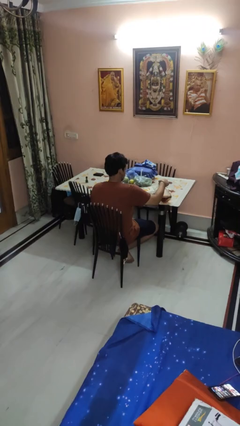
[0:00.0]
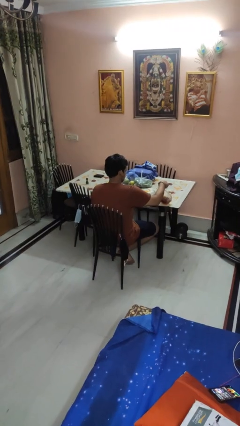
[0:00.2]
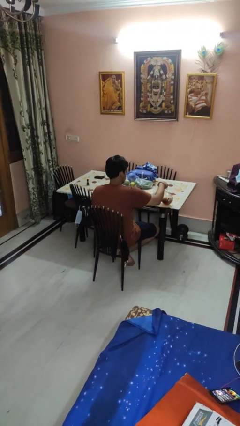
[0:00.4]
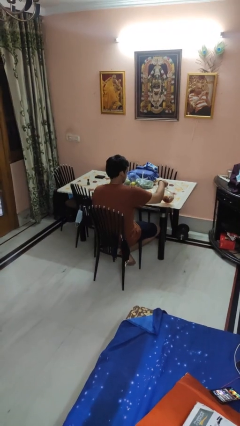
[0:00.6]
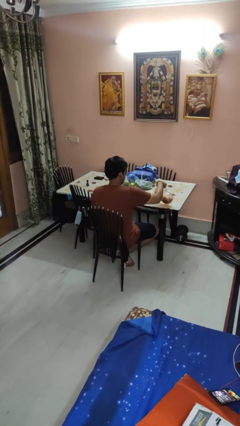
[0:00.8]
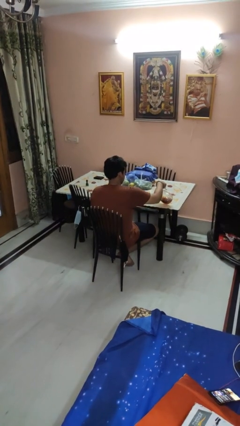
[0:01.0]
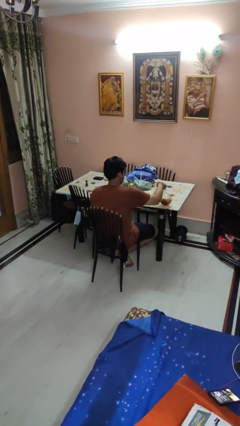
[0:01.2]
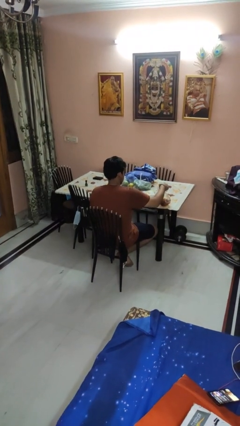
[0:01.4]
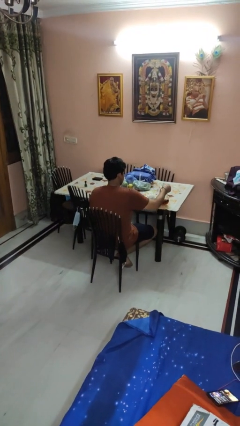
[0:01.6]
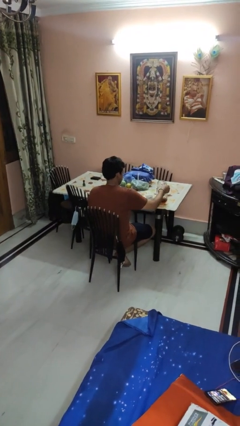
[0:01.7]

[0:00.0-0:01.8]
person pours coffee into mug

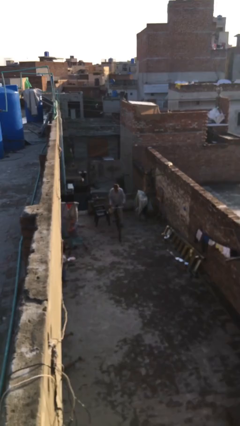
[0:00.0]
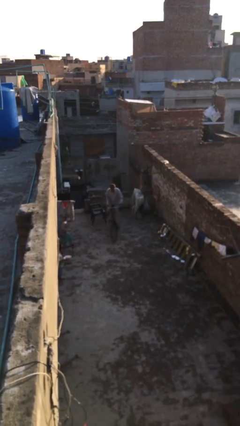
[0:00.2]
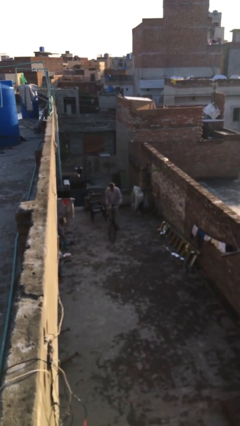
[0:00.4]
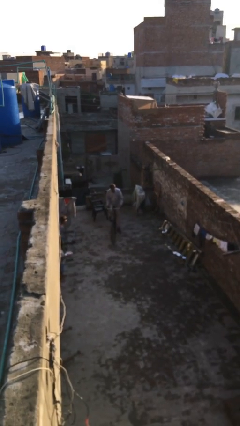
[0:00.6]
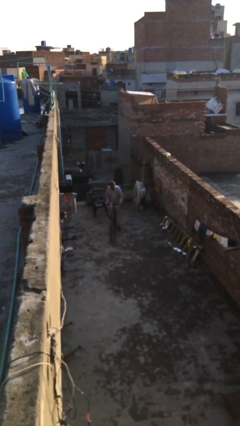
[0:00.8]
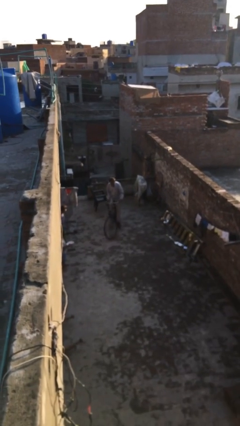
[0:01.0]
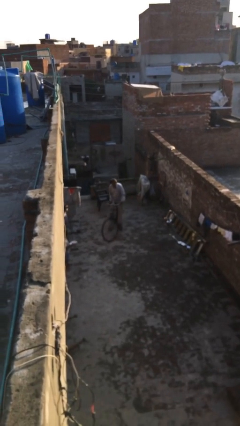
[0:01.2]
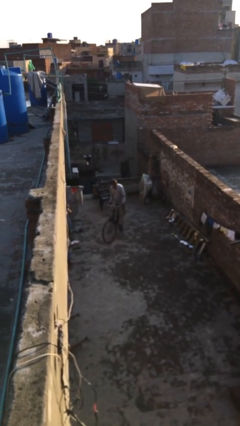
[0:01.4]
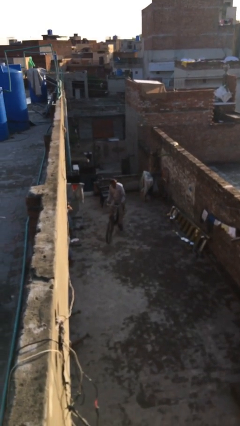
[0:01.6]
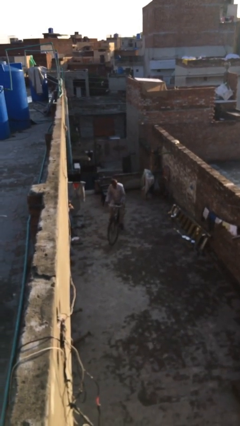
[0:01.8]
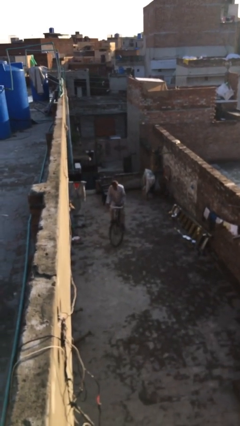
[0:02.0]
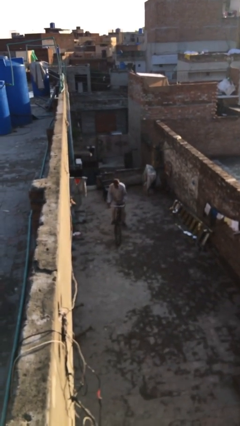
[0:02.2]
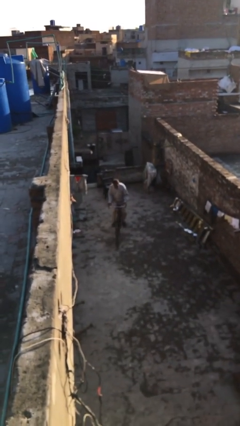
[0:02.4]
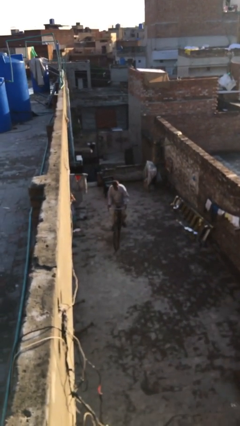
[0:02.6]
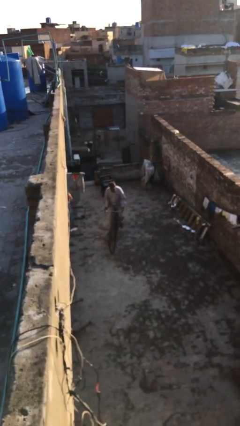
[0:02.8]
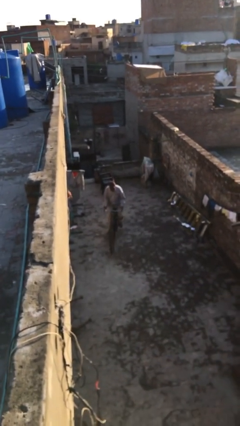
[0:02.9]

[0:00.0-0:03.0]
person rides bicycle

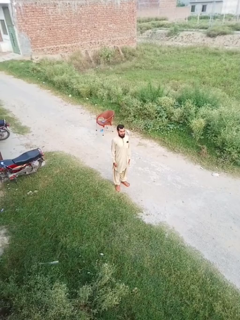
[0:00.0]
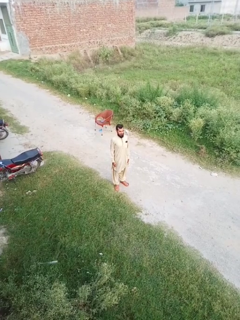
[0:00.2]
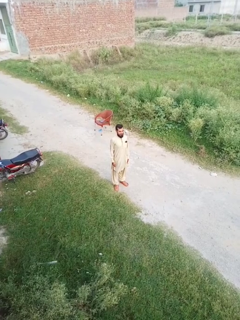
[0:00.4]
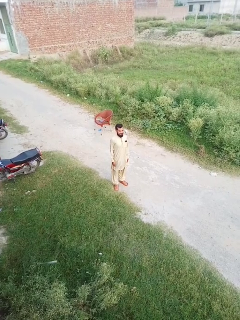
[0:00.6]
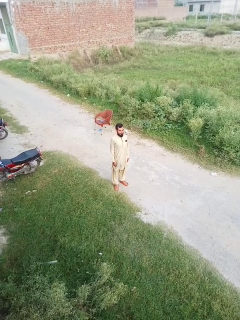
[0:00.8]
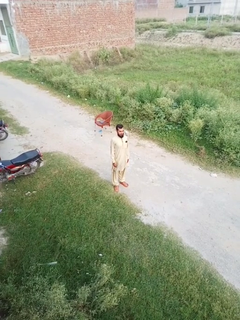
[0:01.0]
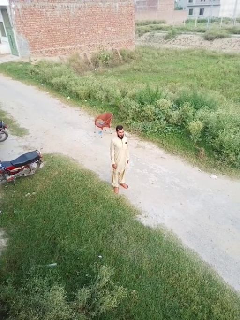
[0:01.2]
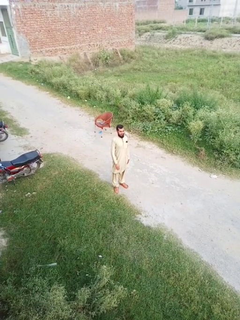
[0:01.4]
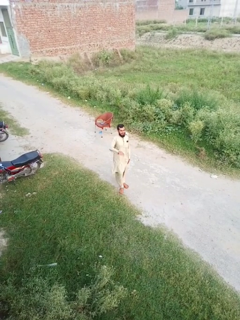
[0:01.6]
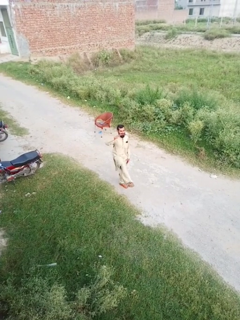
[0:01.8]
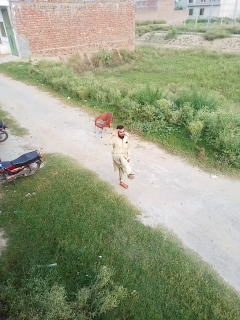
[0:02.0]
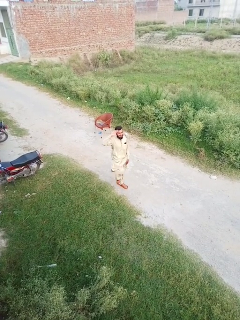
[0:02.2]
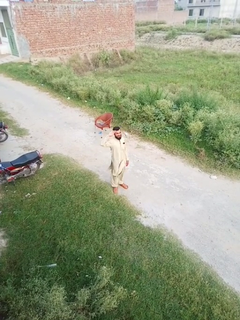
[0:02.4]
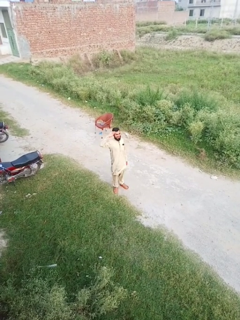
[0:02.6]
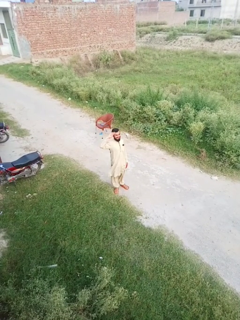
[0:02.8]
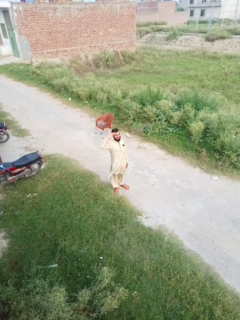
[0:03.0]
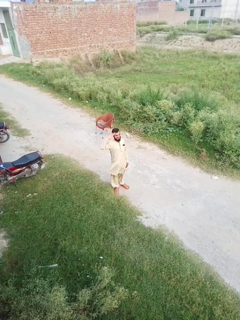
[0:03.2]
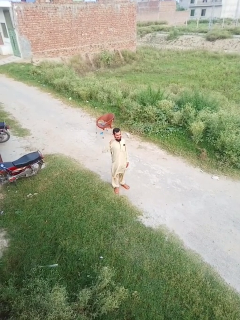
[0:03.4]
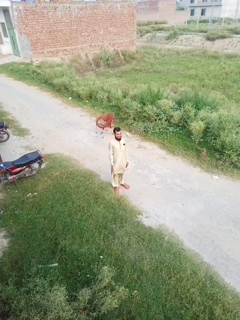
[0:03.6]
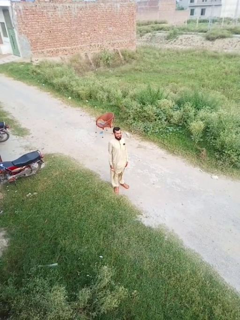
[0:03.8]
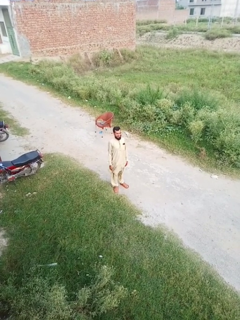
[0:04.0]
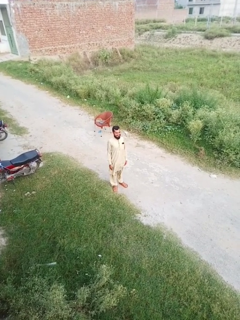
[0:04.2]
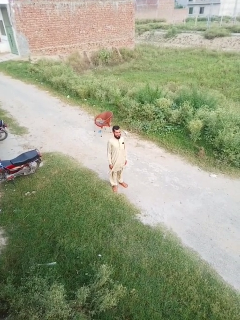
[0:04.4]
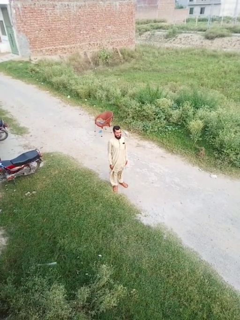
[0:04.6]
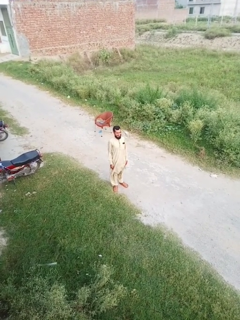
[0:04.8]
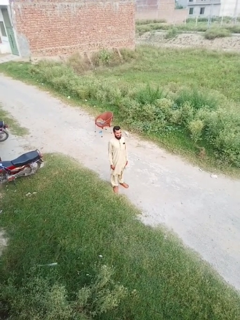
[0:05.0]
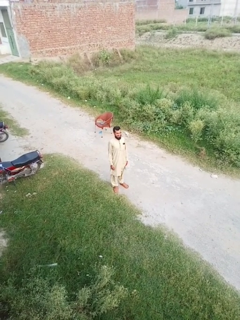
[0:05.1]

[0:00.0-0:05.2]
person salutes

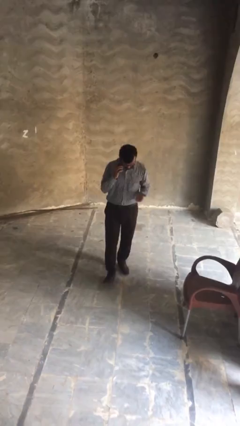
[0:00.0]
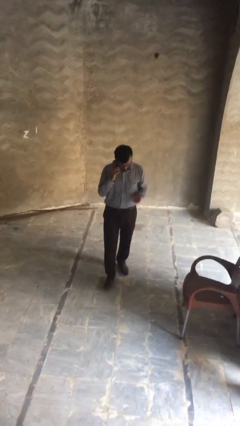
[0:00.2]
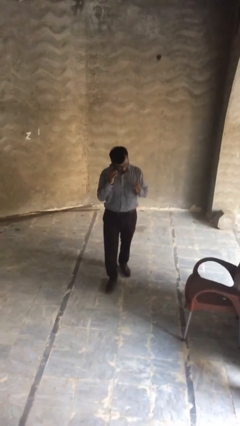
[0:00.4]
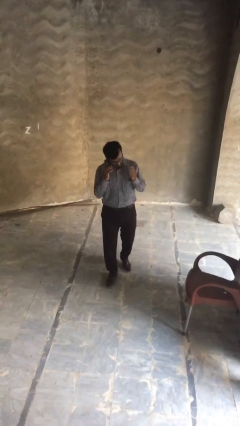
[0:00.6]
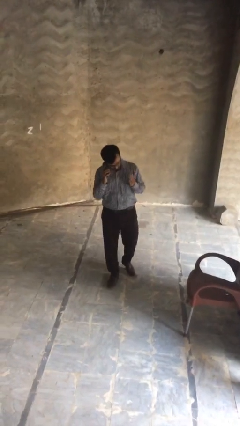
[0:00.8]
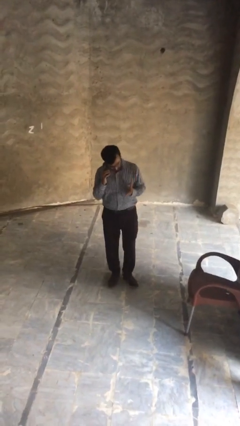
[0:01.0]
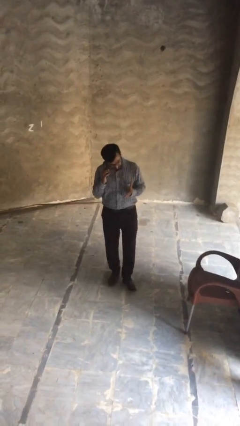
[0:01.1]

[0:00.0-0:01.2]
person talks on phone

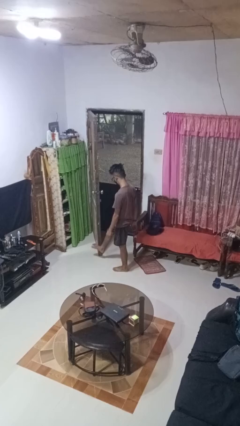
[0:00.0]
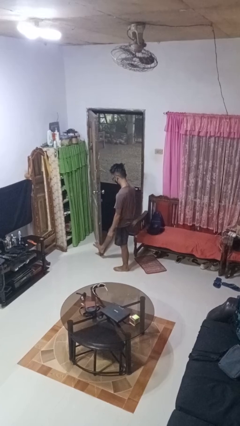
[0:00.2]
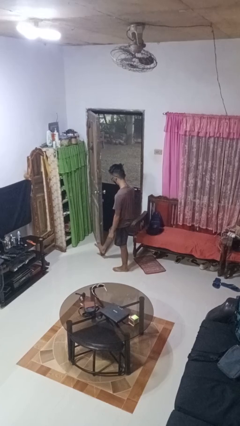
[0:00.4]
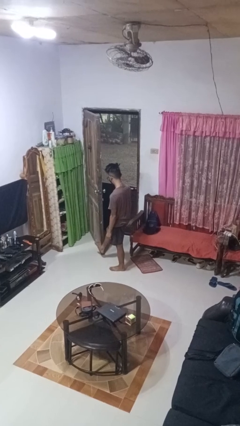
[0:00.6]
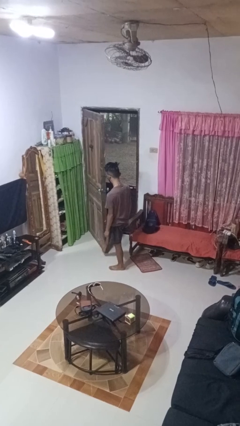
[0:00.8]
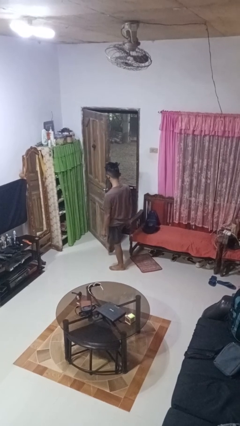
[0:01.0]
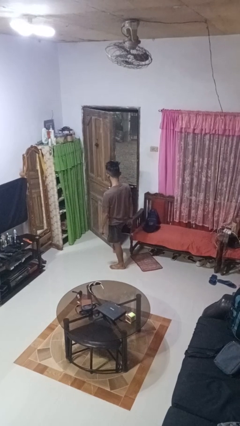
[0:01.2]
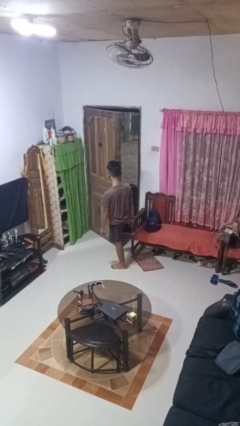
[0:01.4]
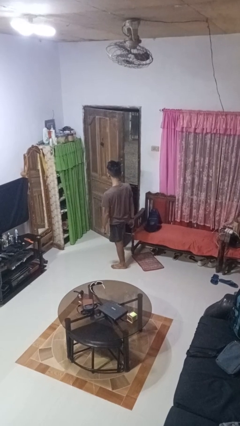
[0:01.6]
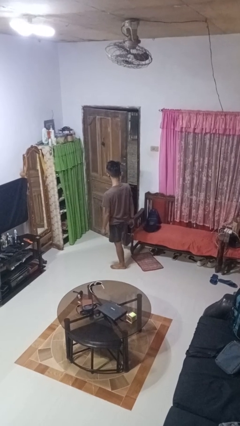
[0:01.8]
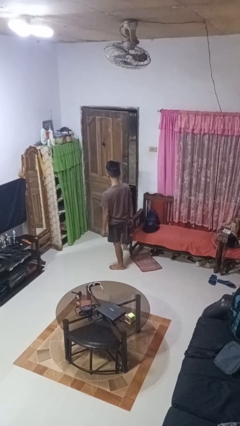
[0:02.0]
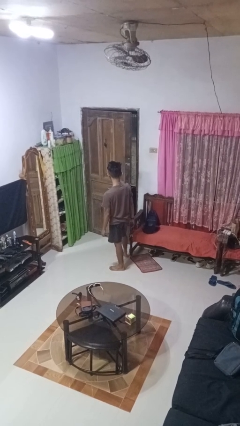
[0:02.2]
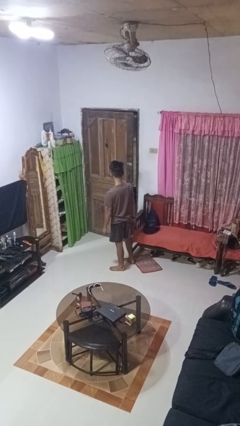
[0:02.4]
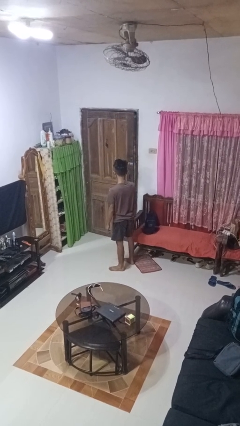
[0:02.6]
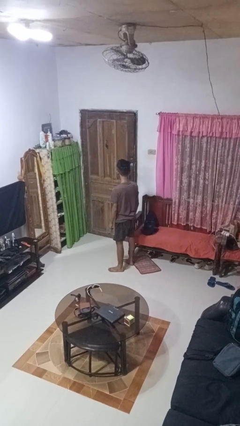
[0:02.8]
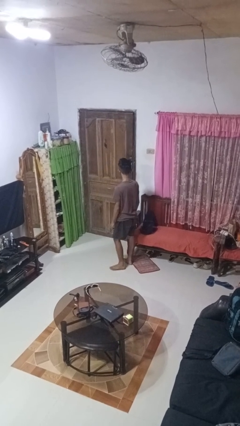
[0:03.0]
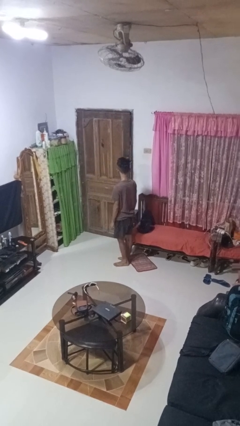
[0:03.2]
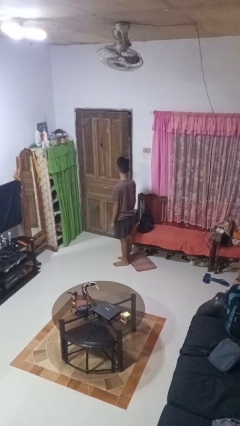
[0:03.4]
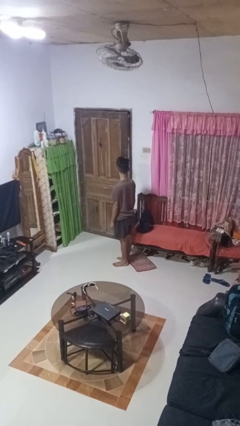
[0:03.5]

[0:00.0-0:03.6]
person closes door with foot

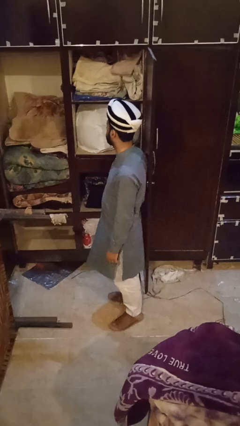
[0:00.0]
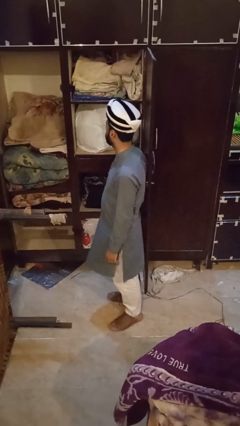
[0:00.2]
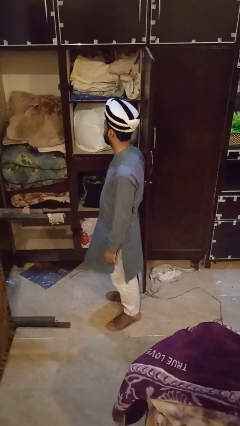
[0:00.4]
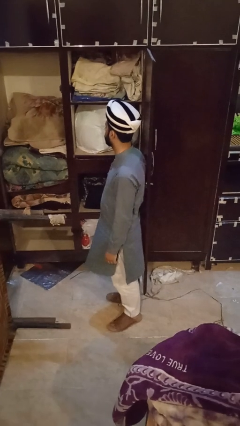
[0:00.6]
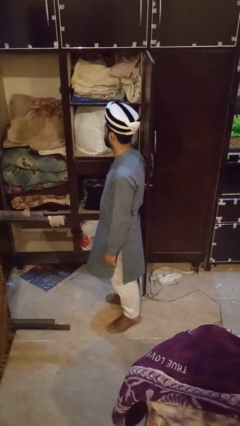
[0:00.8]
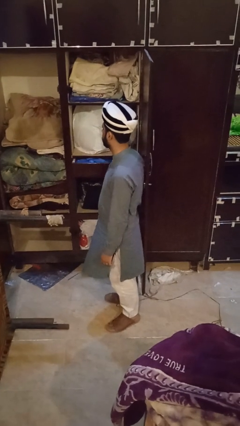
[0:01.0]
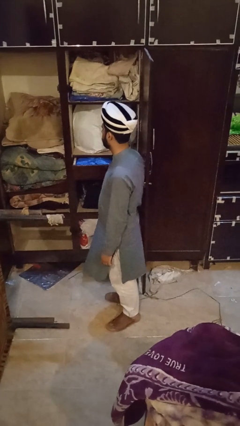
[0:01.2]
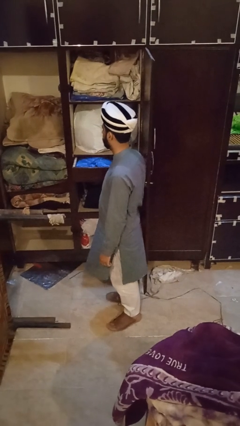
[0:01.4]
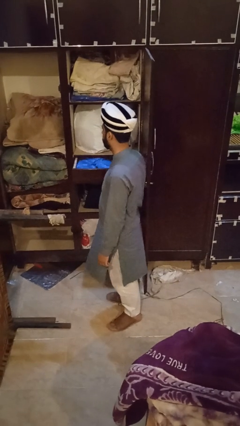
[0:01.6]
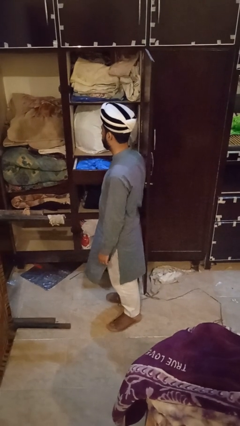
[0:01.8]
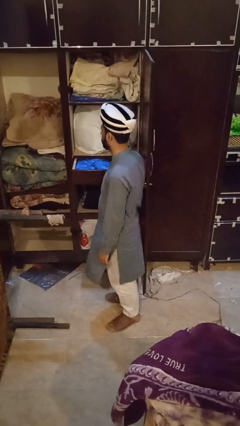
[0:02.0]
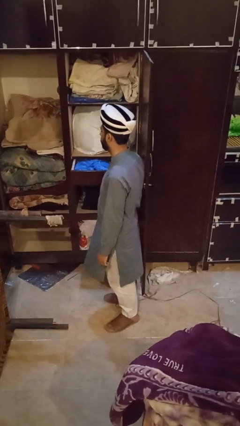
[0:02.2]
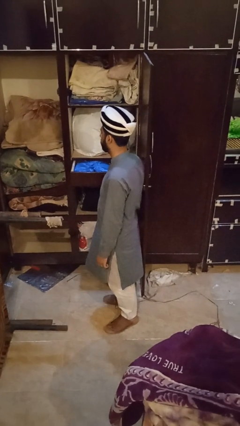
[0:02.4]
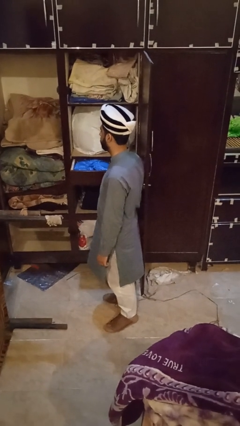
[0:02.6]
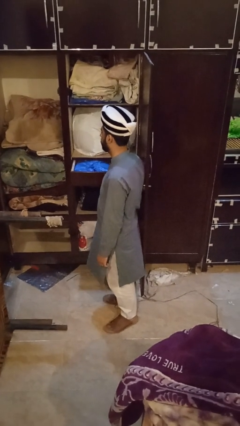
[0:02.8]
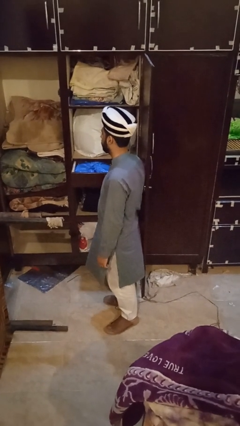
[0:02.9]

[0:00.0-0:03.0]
person opens dresser drawer

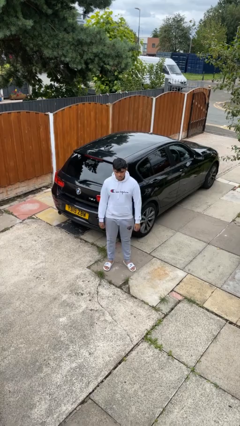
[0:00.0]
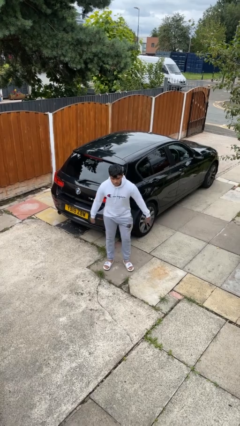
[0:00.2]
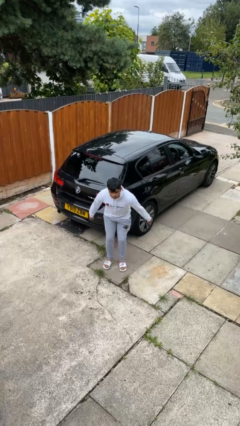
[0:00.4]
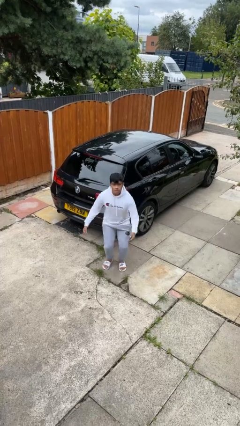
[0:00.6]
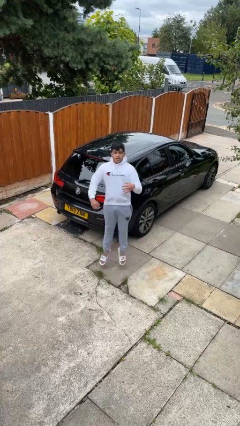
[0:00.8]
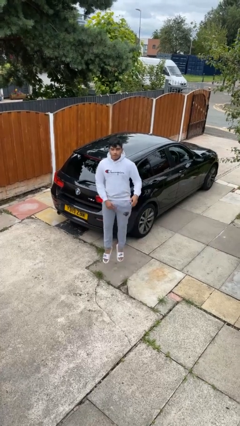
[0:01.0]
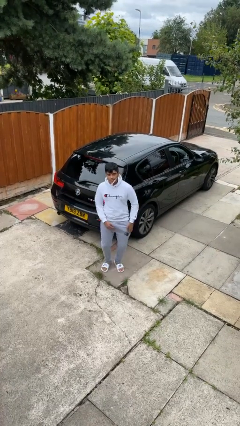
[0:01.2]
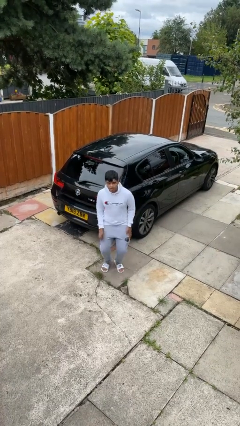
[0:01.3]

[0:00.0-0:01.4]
person jumps
